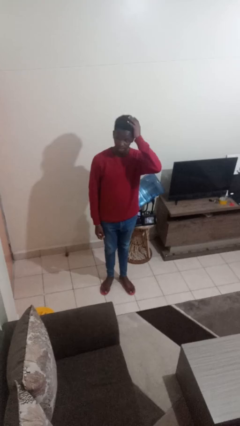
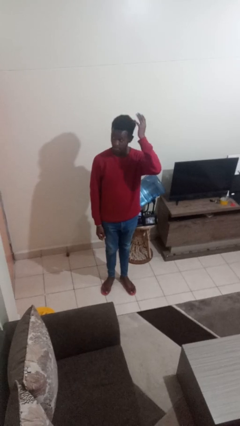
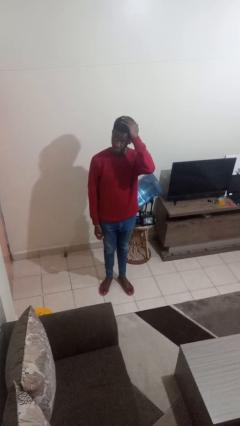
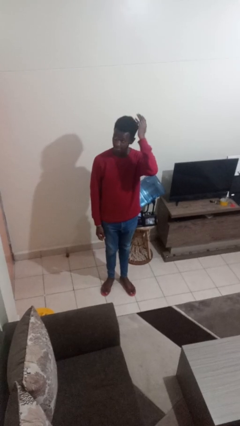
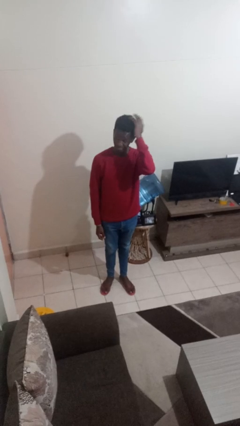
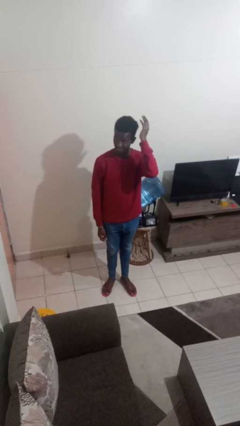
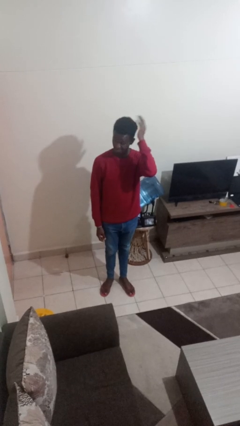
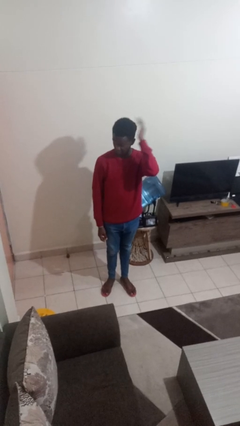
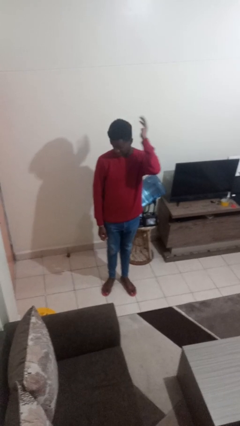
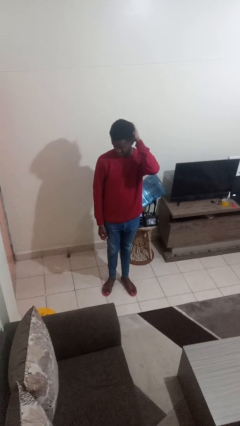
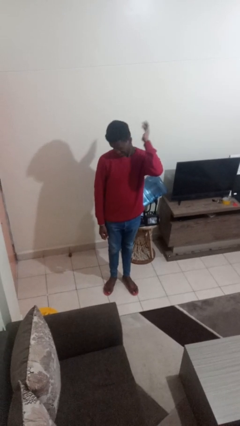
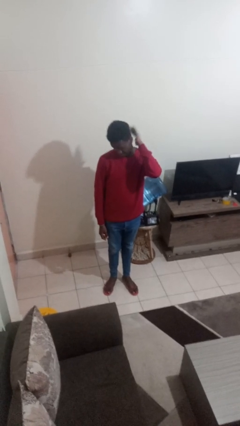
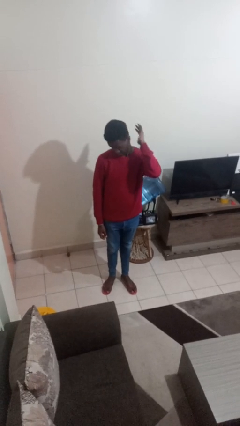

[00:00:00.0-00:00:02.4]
person pats head

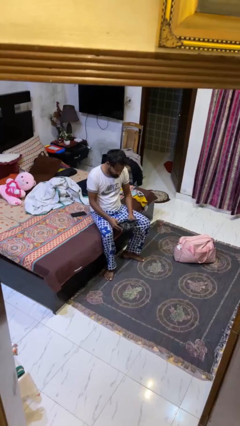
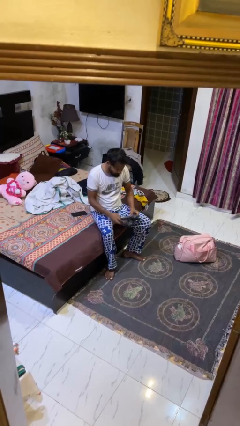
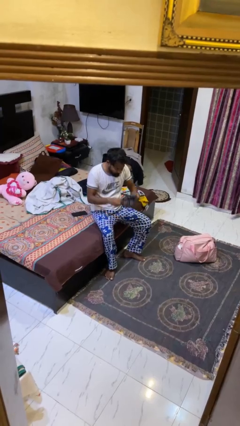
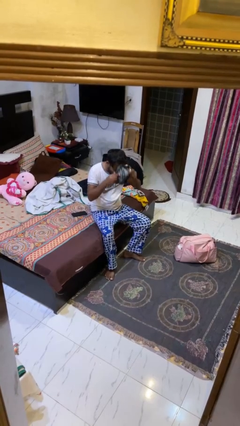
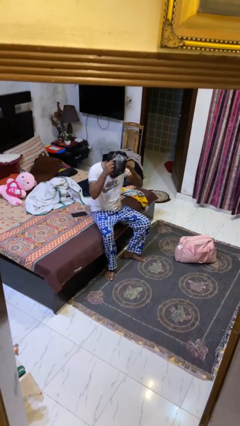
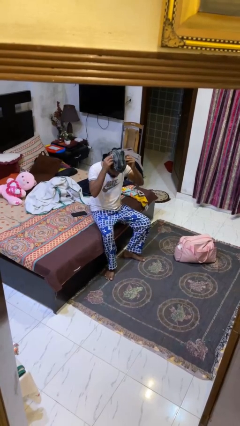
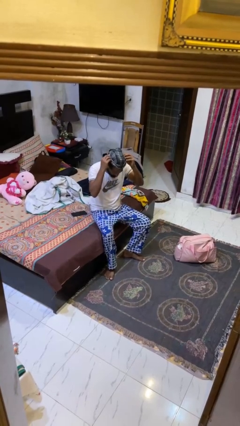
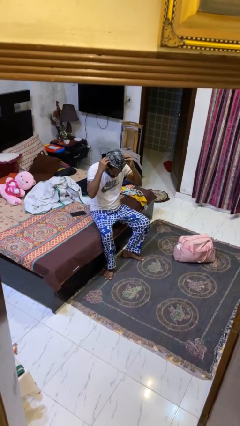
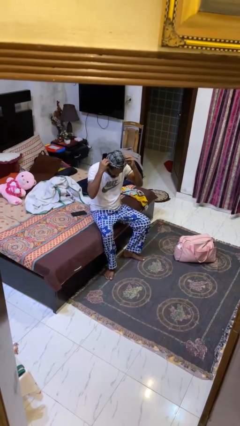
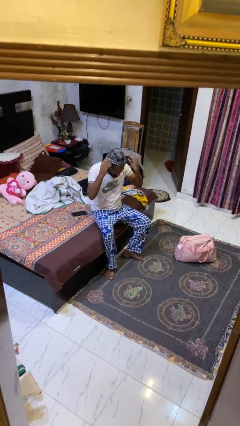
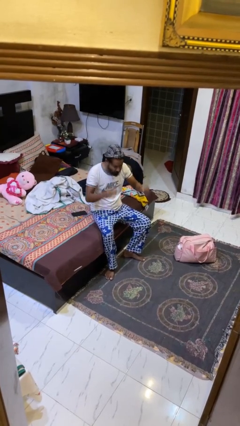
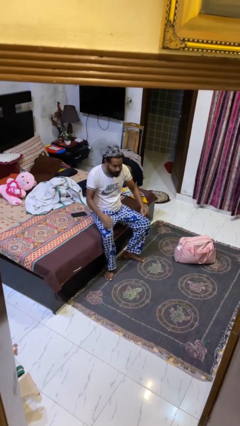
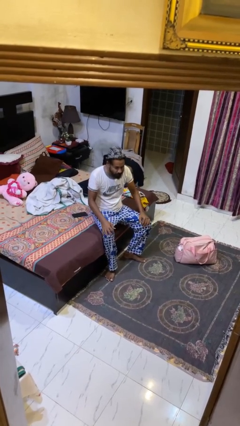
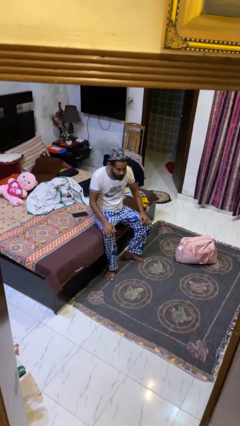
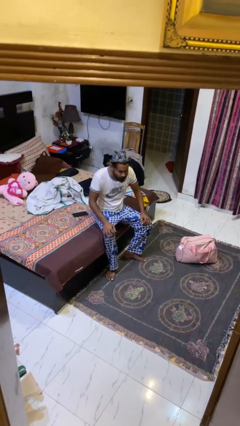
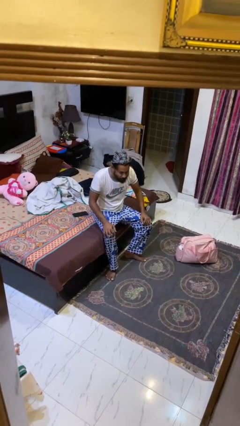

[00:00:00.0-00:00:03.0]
person puts on hat

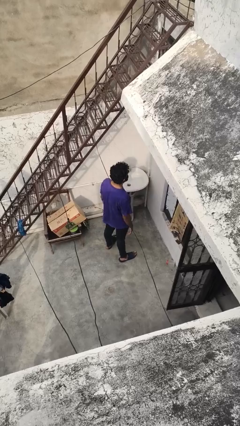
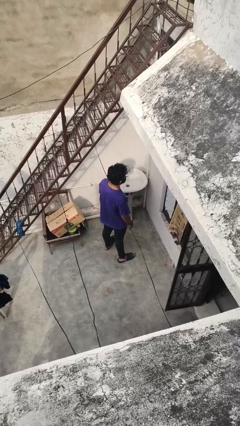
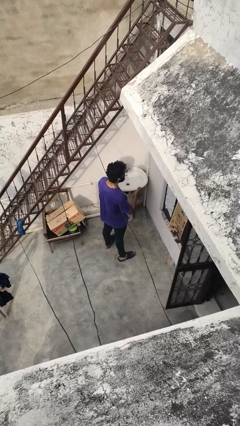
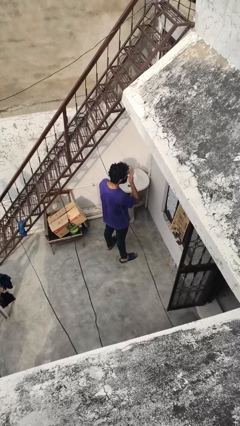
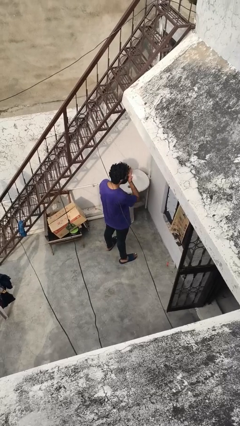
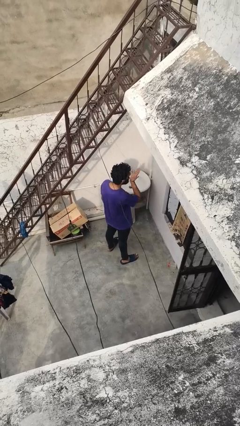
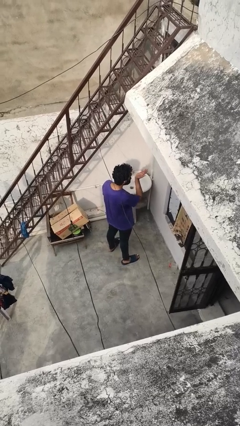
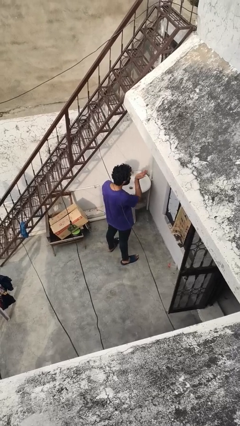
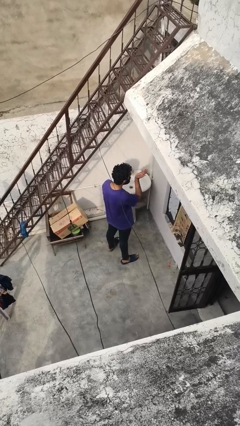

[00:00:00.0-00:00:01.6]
person gestures blow kiss

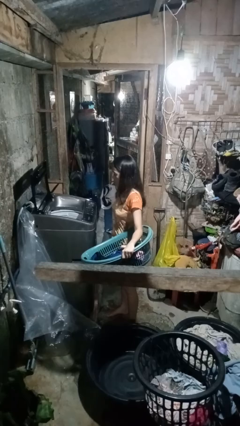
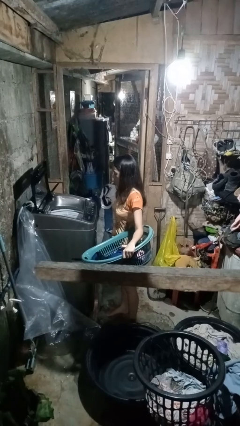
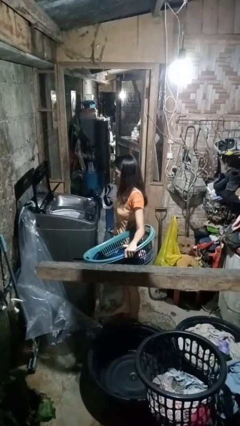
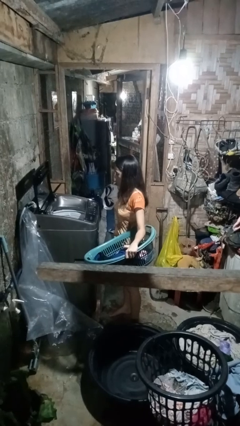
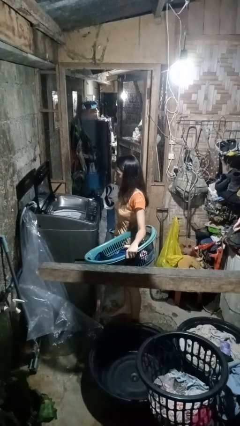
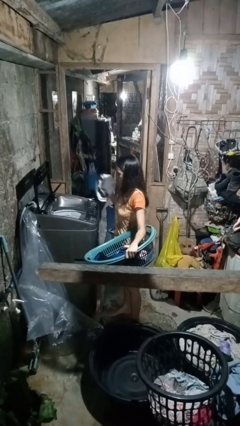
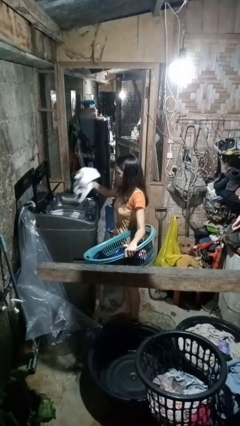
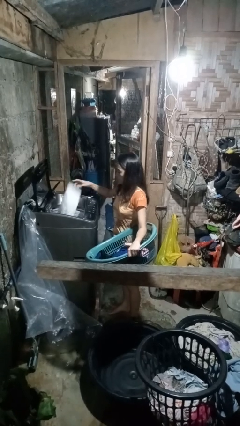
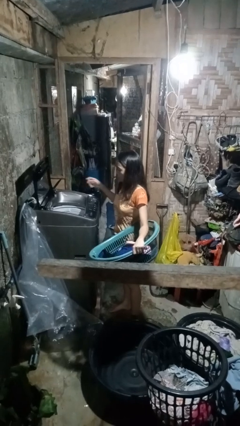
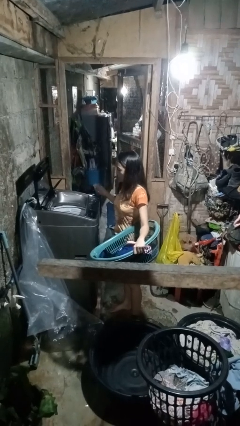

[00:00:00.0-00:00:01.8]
person loads clotheswasher

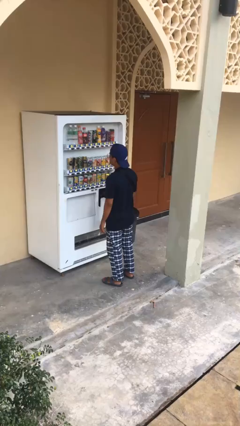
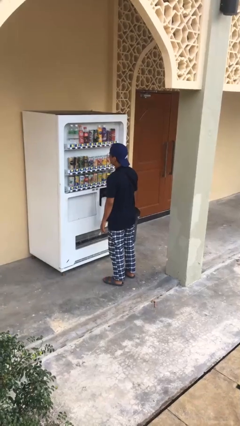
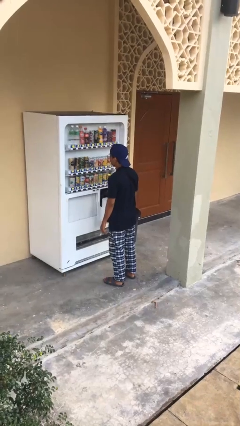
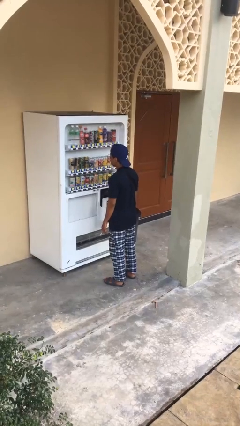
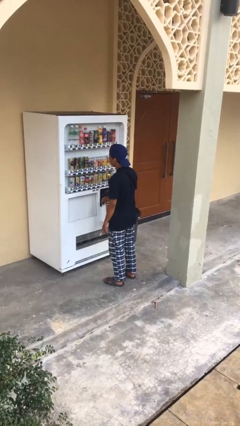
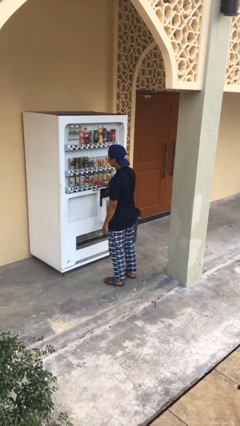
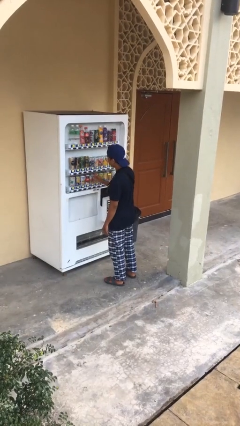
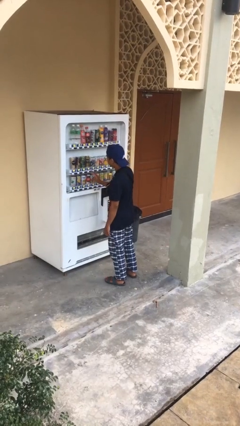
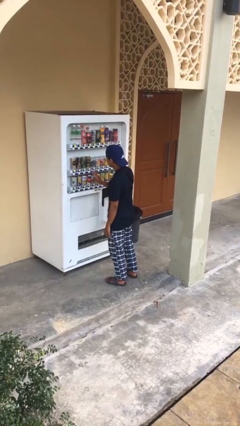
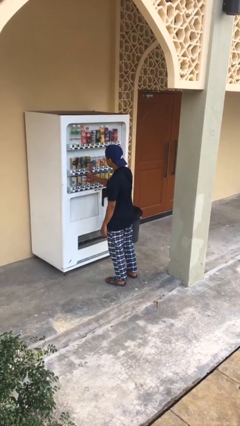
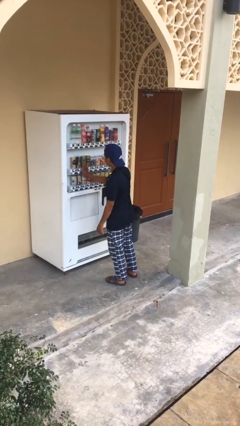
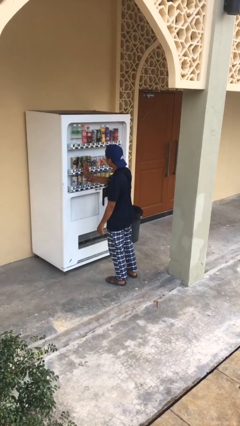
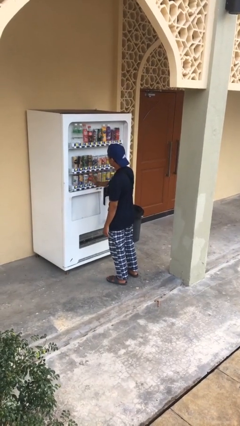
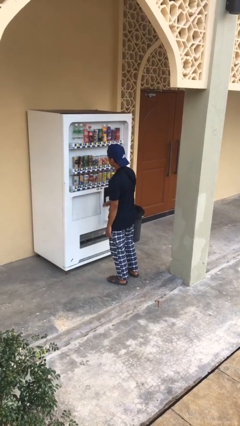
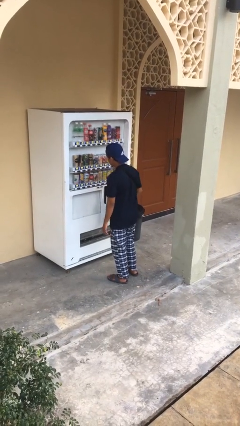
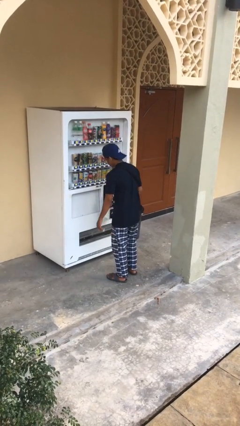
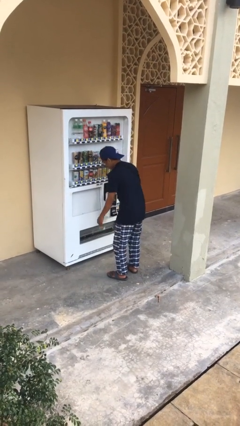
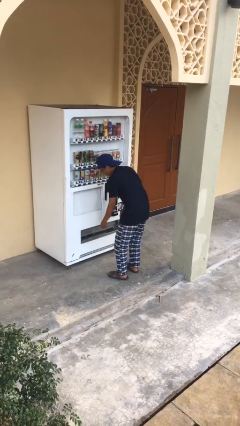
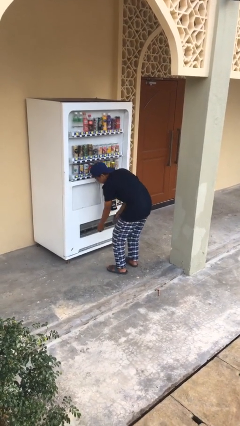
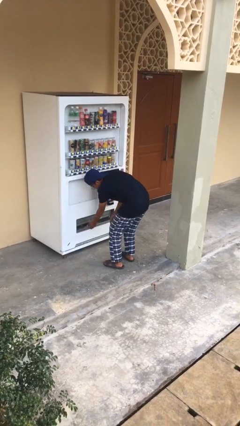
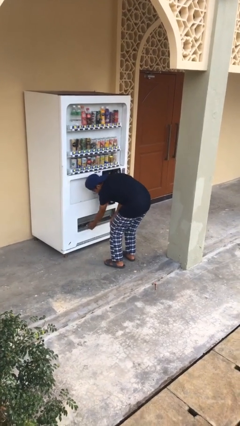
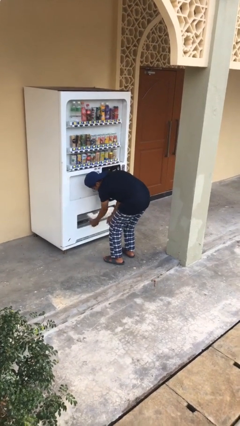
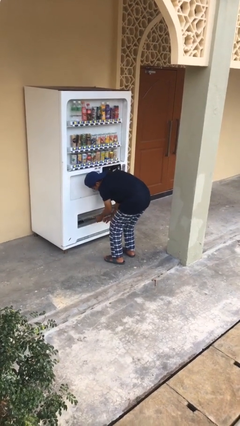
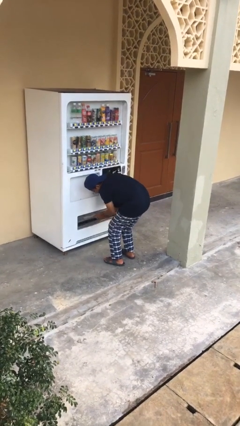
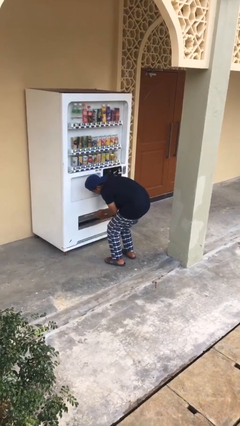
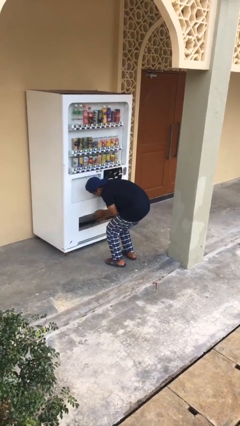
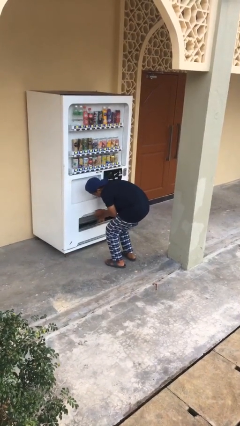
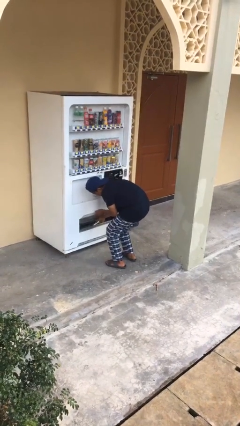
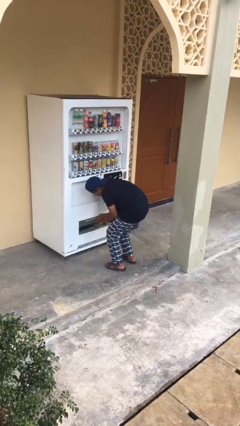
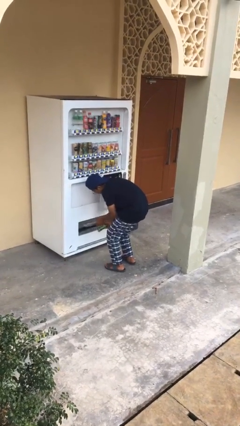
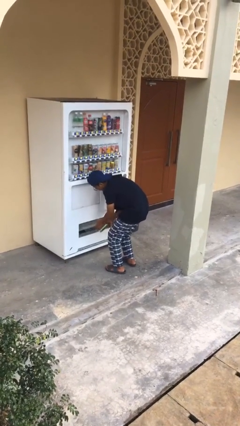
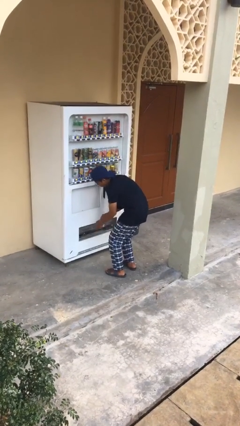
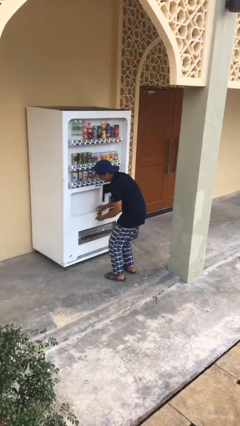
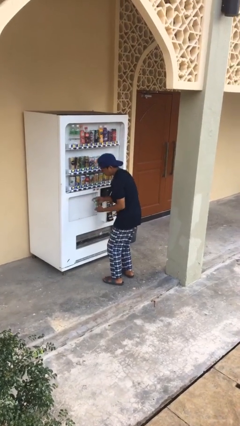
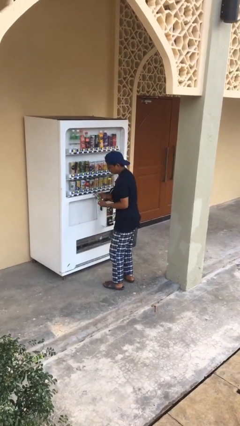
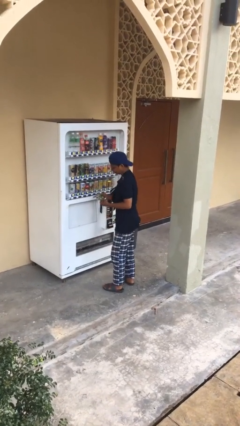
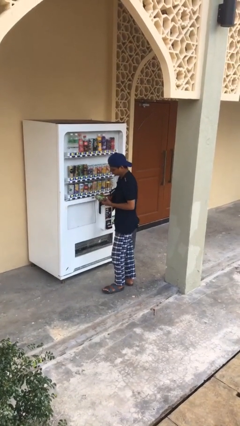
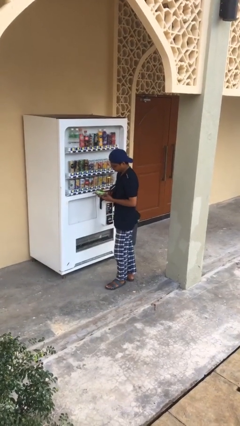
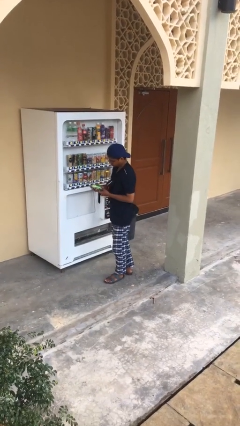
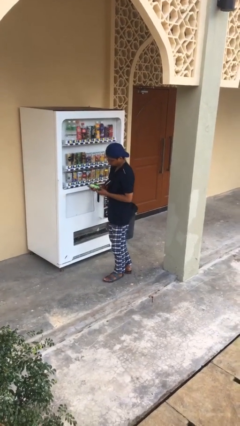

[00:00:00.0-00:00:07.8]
person purchases from machine

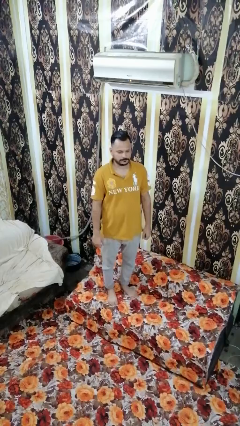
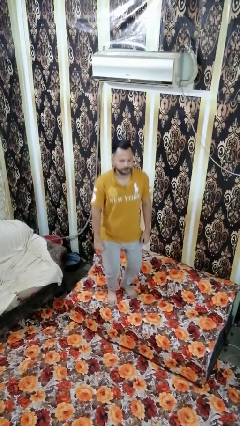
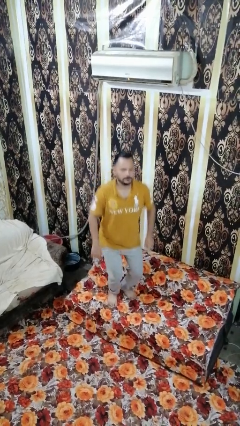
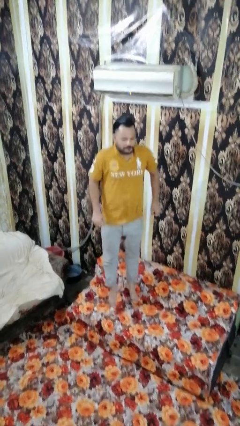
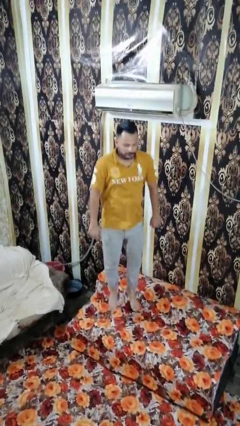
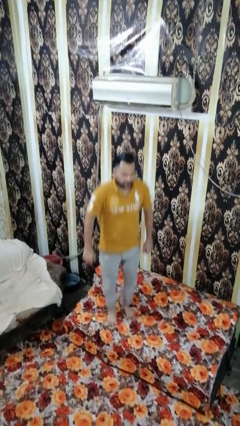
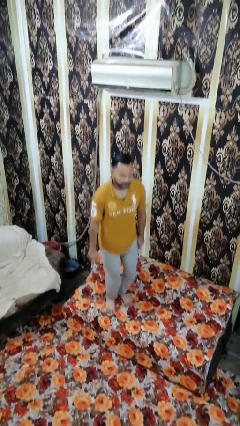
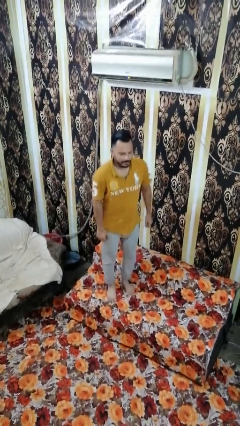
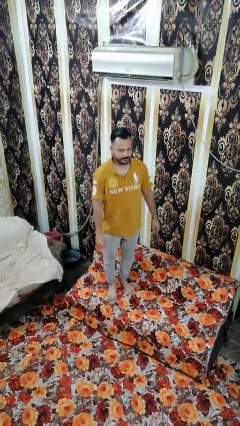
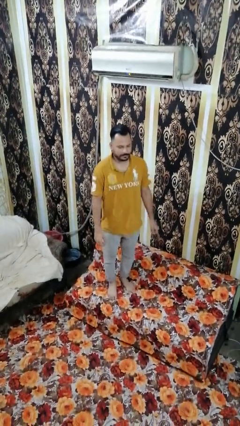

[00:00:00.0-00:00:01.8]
person jumps on couch
